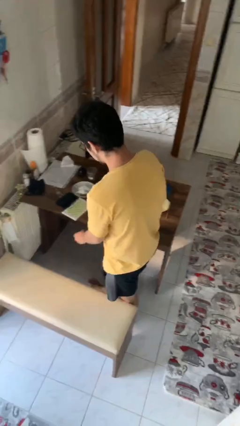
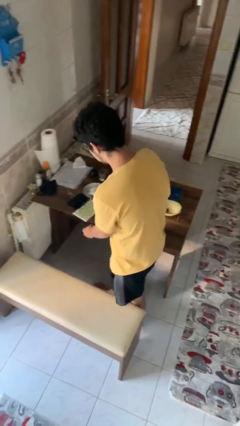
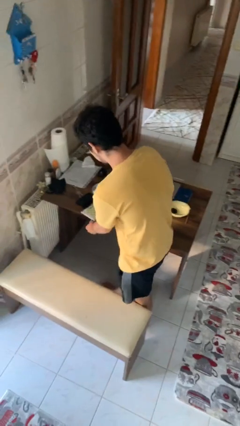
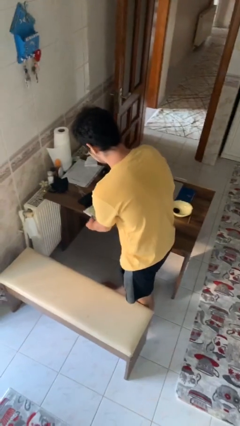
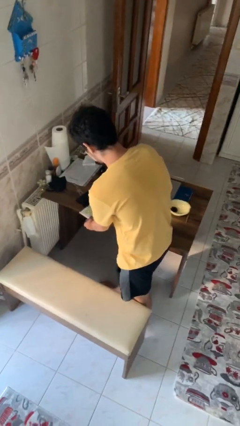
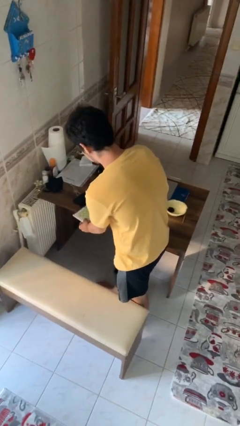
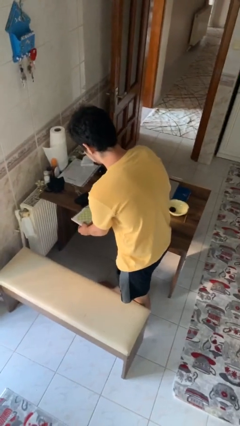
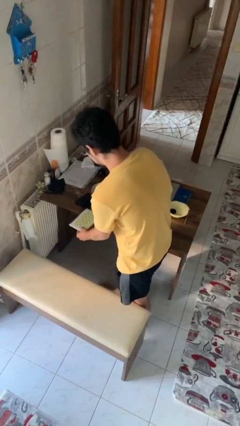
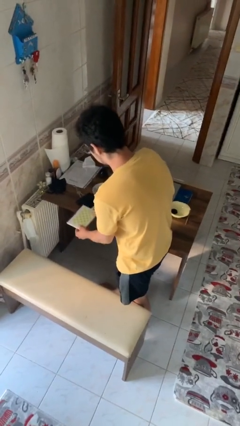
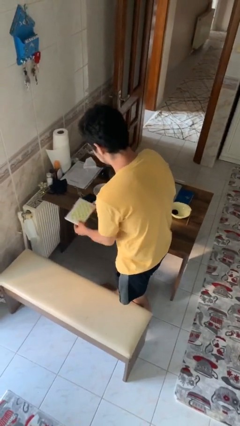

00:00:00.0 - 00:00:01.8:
person picks up object from table

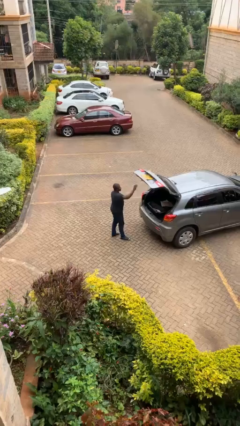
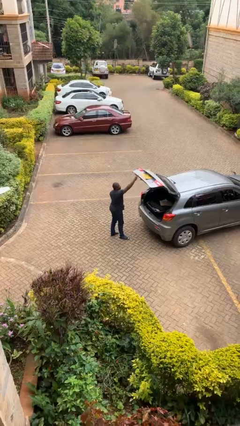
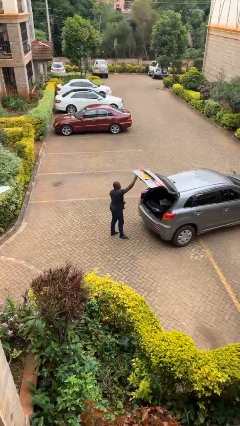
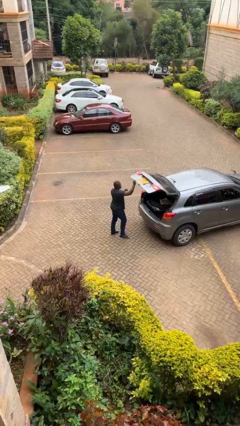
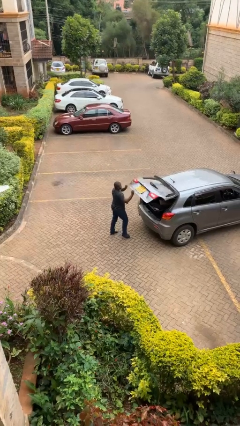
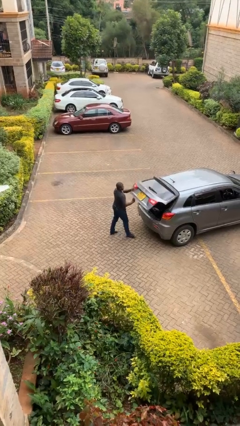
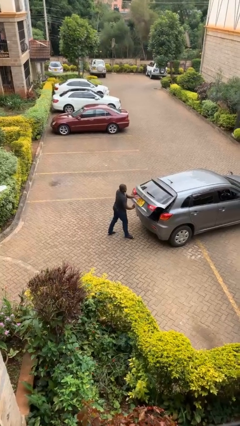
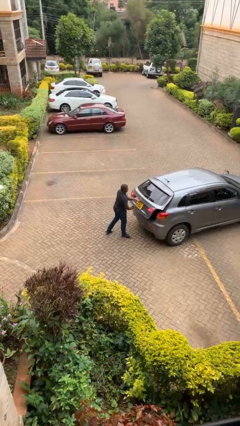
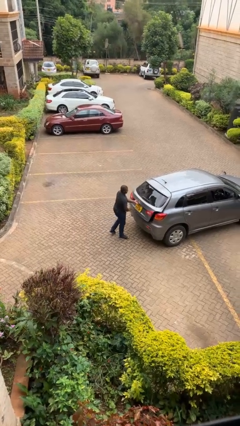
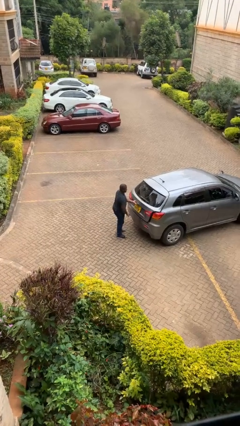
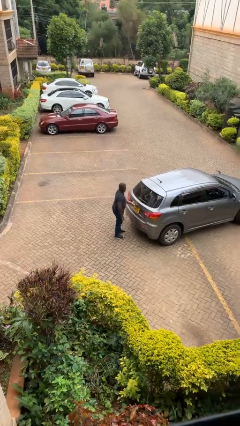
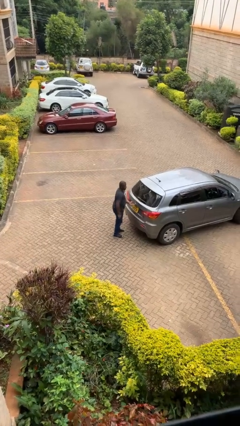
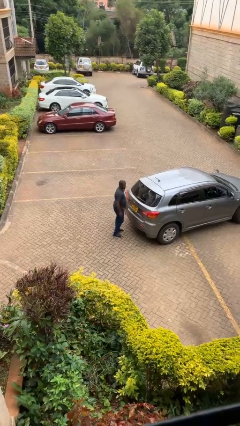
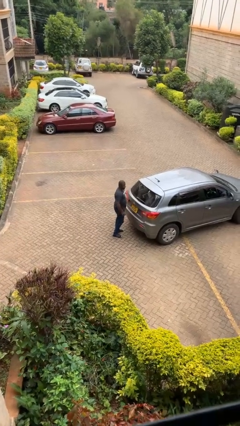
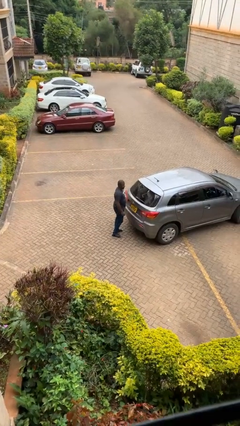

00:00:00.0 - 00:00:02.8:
person closes car trunk

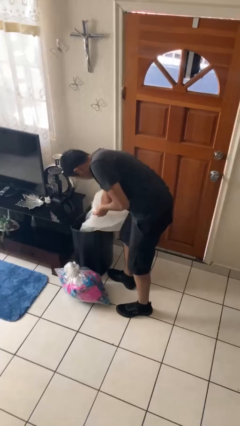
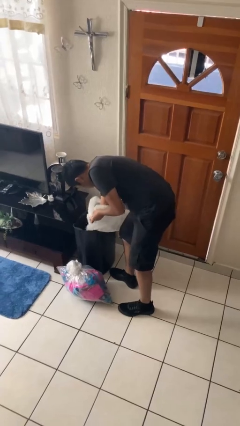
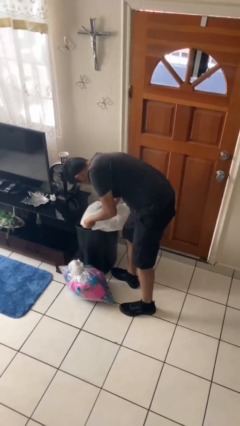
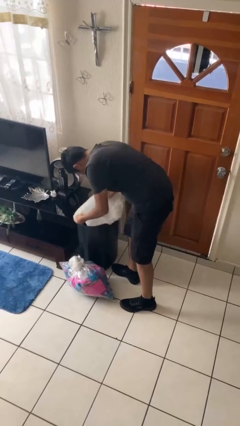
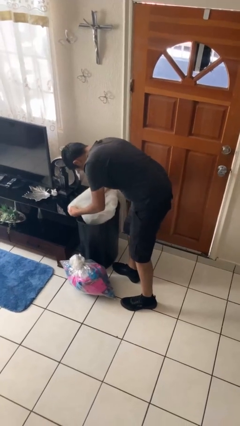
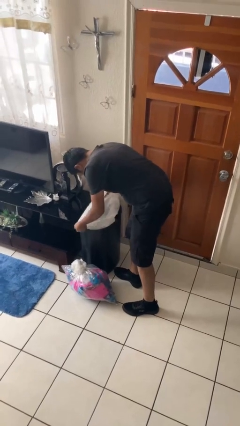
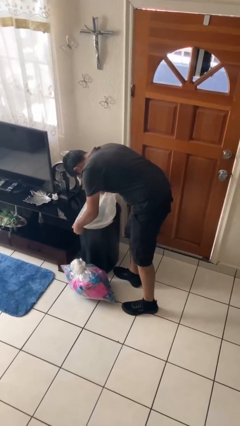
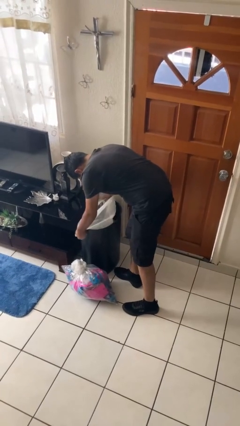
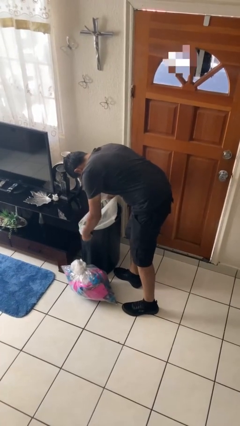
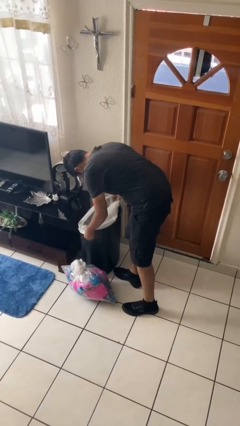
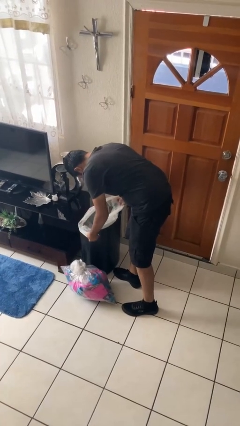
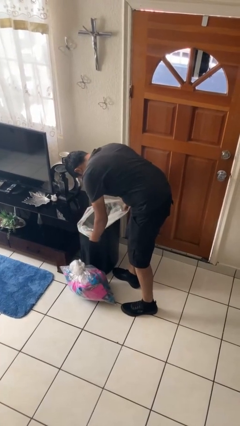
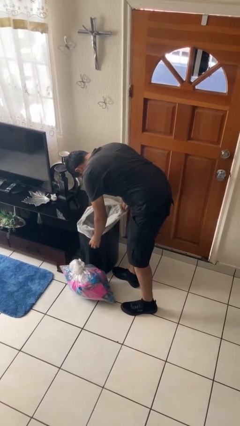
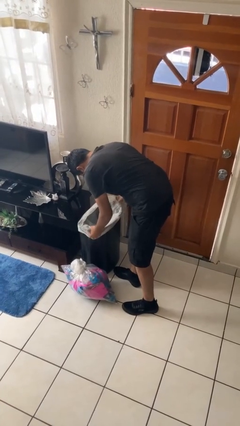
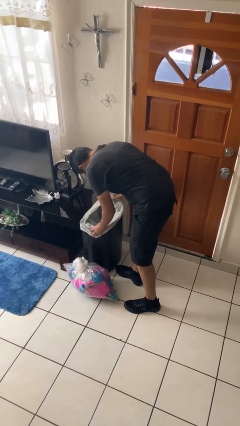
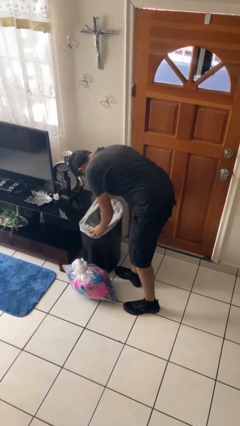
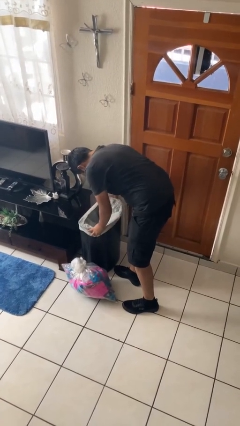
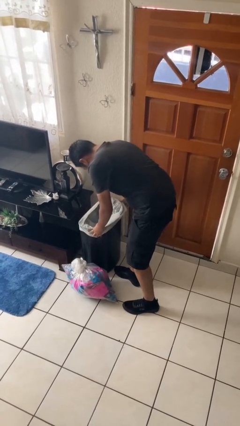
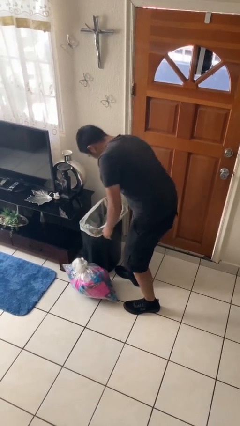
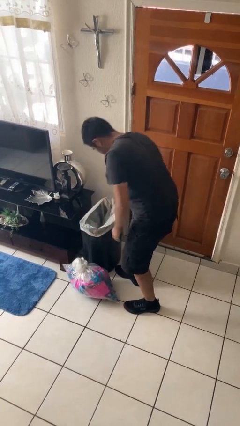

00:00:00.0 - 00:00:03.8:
person inserts trashbag into trashcan

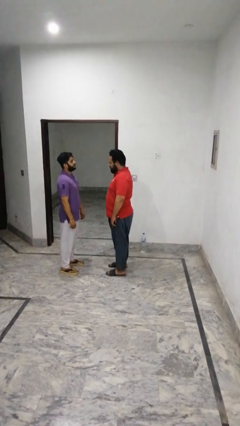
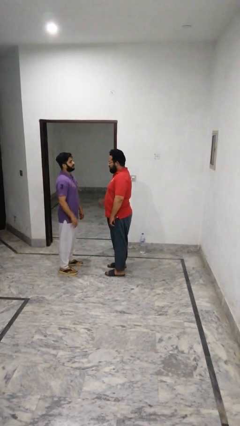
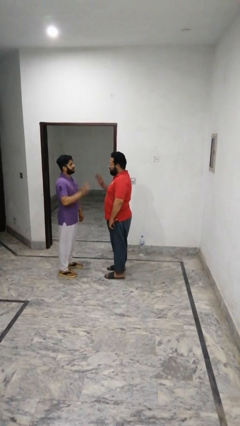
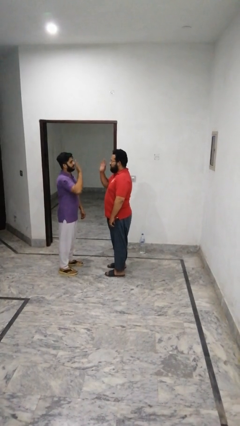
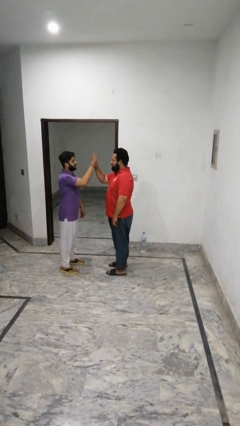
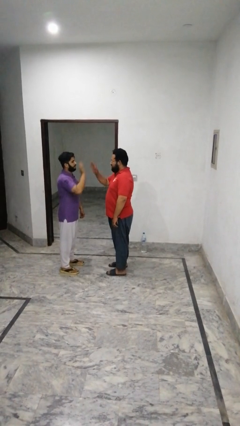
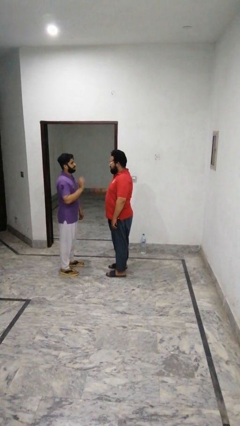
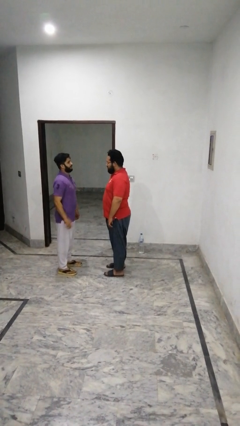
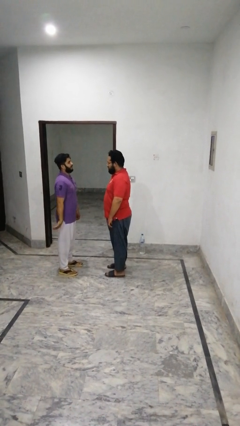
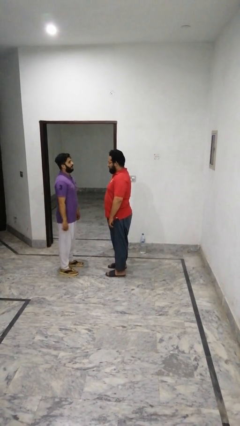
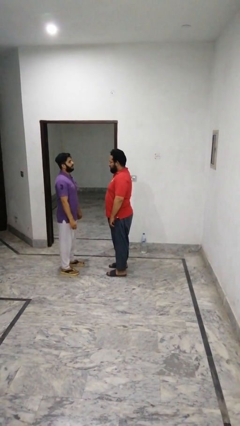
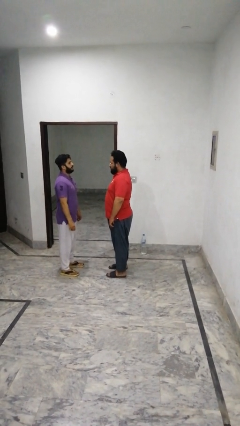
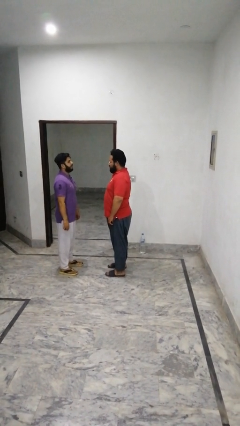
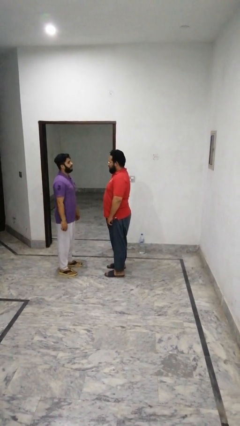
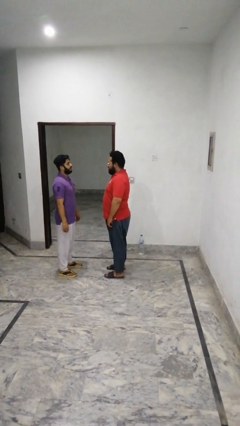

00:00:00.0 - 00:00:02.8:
person highfives hand

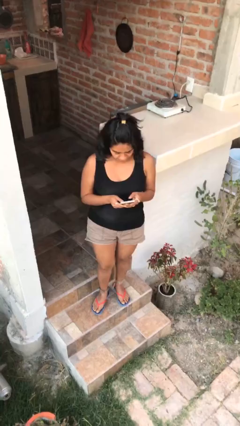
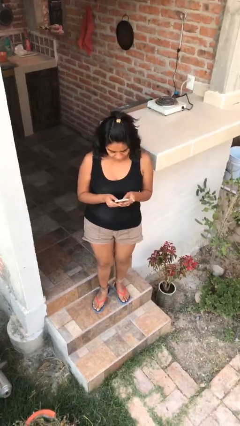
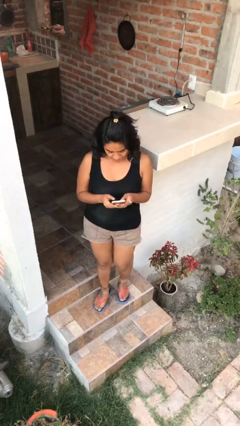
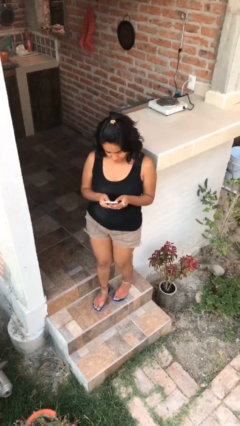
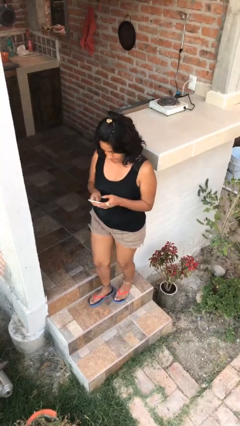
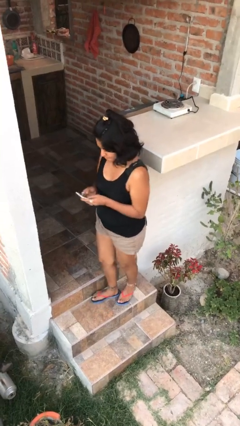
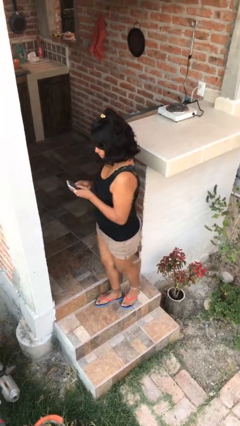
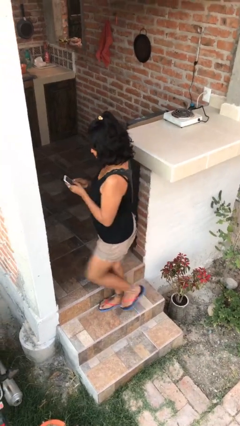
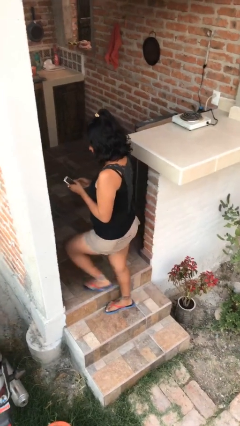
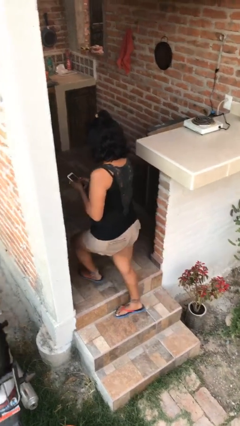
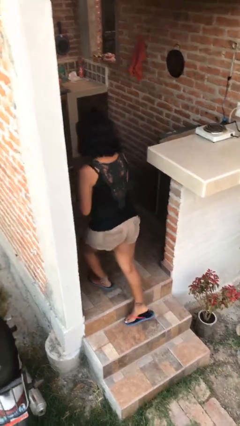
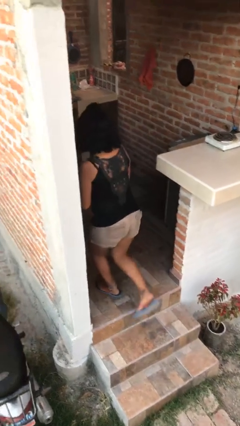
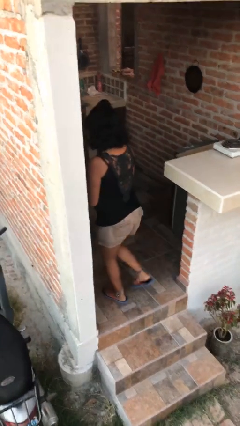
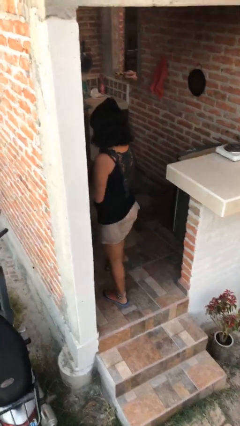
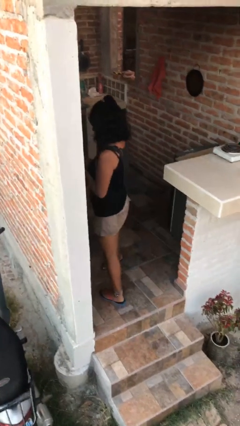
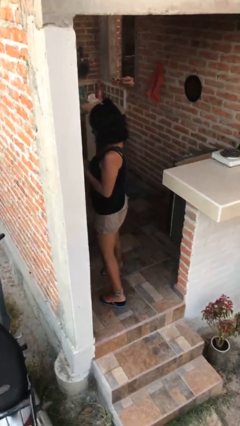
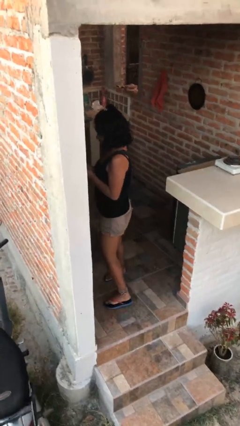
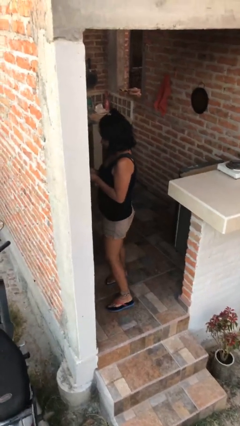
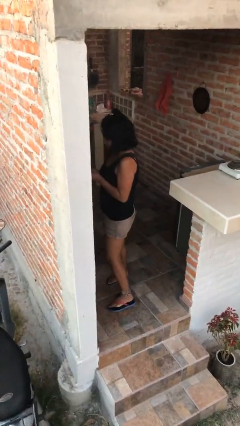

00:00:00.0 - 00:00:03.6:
person exits scene through structure

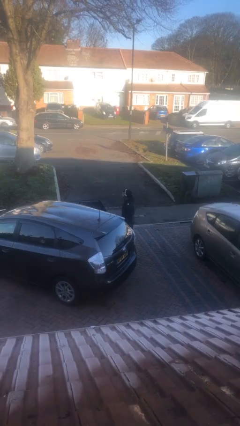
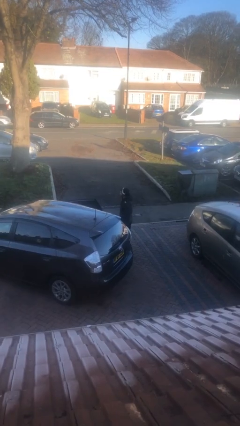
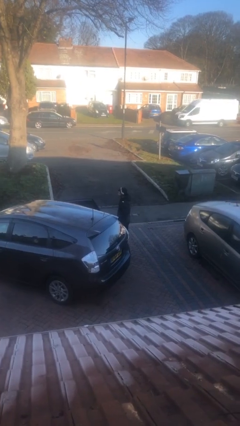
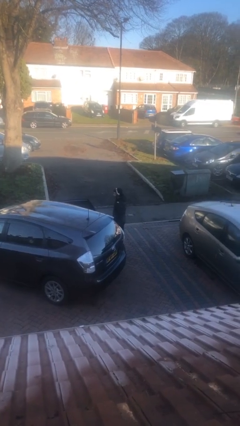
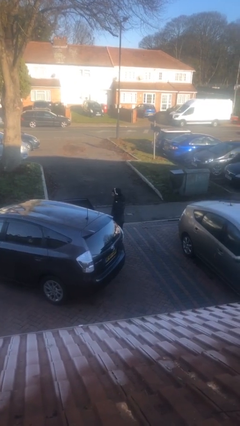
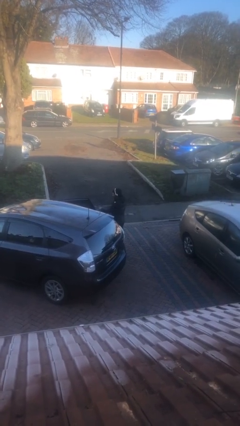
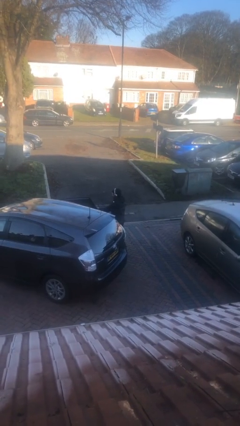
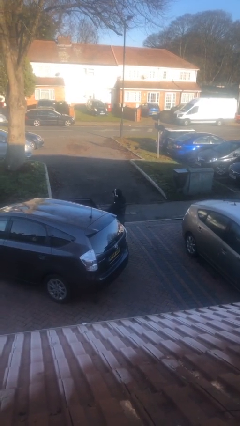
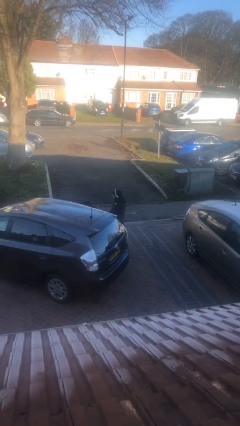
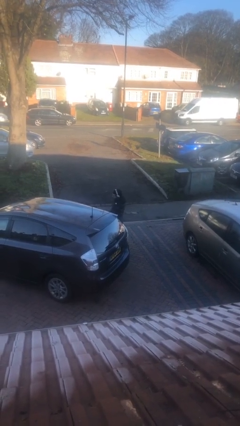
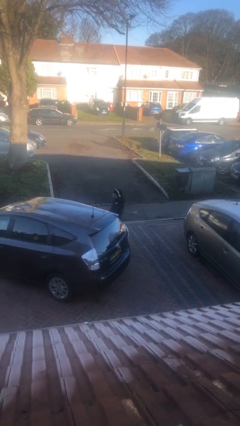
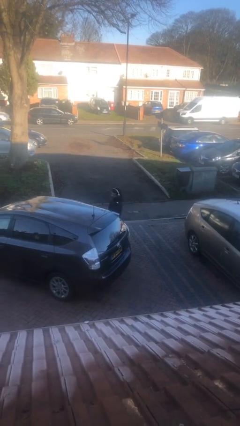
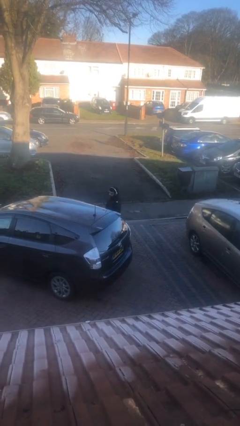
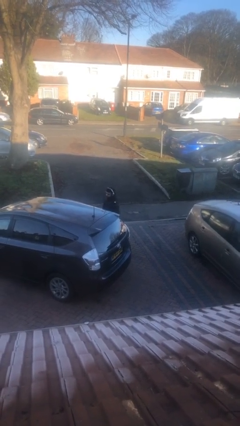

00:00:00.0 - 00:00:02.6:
person closes car door
